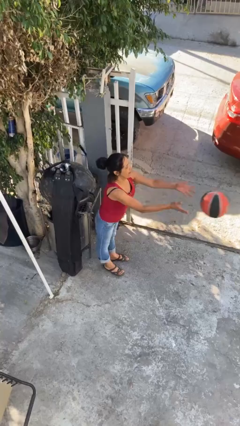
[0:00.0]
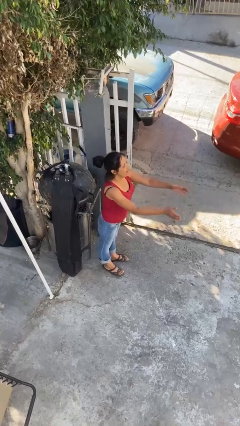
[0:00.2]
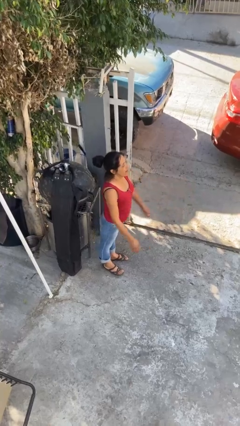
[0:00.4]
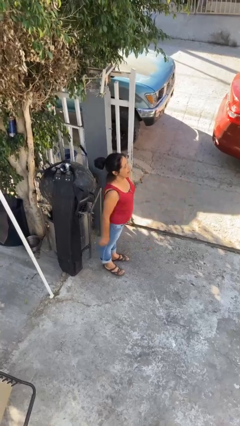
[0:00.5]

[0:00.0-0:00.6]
person throws object to person

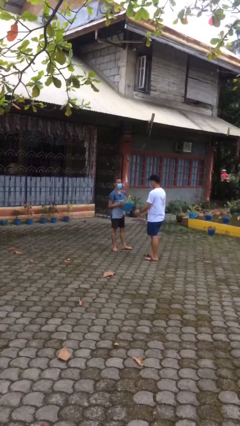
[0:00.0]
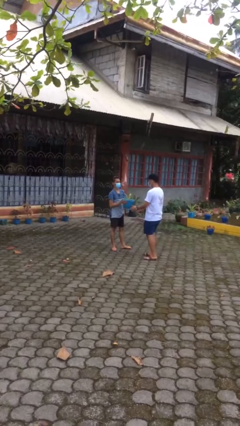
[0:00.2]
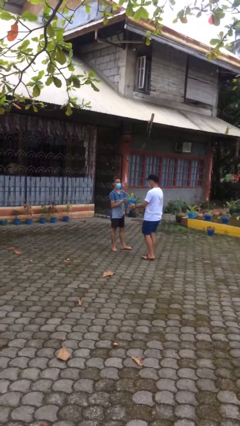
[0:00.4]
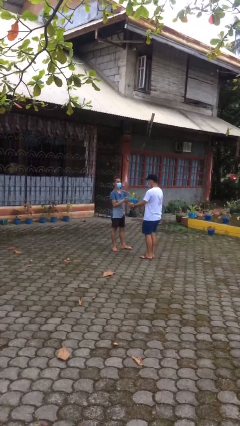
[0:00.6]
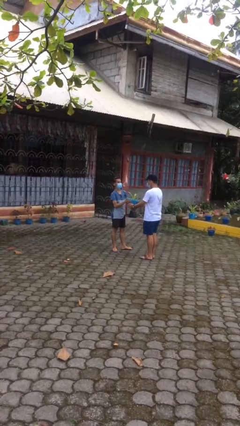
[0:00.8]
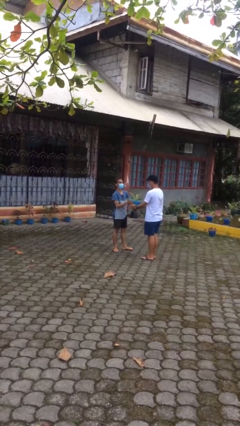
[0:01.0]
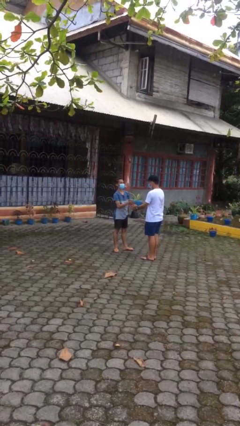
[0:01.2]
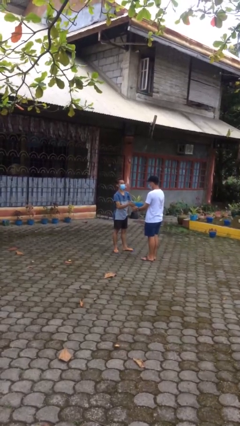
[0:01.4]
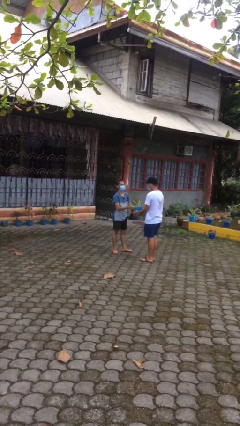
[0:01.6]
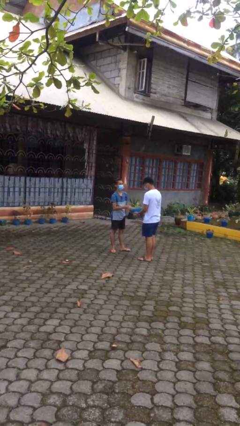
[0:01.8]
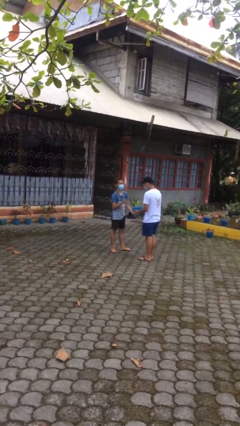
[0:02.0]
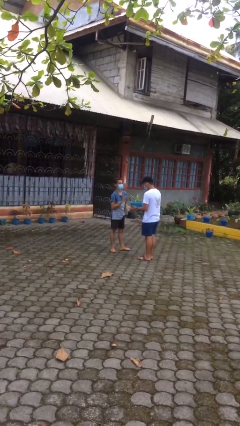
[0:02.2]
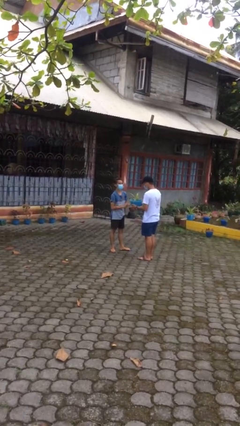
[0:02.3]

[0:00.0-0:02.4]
person transfers object to person

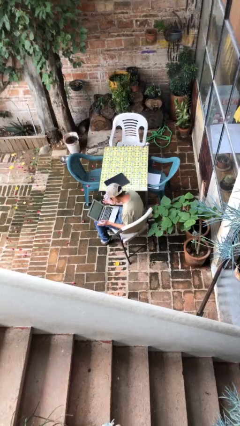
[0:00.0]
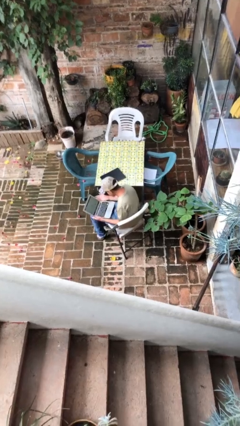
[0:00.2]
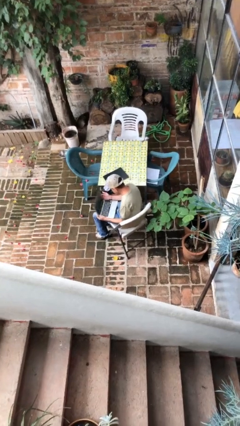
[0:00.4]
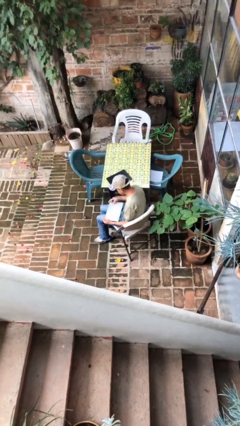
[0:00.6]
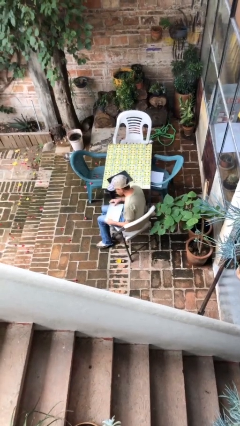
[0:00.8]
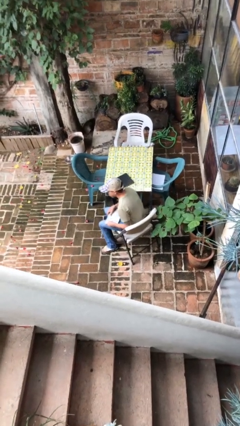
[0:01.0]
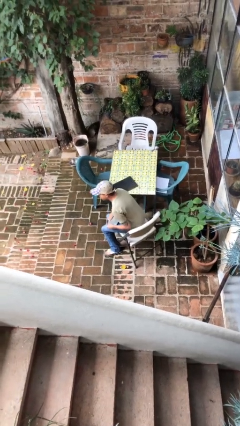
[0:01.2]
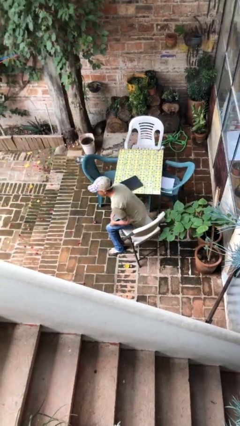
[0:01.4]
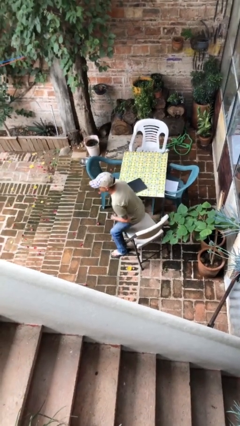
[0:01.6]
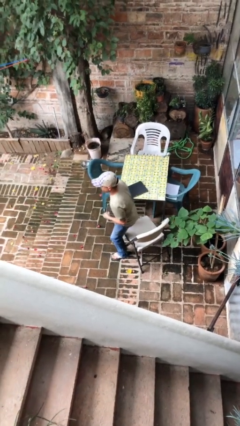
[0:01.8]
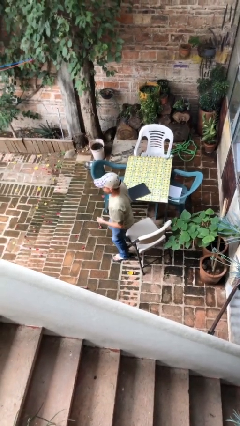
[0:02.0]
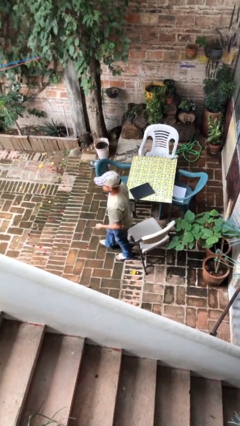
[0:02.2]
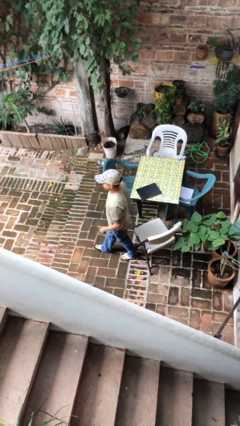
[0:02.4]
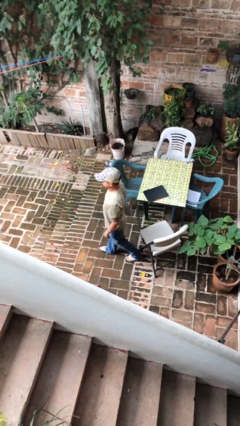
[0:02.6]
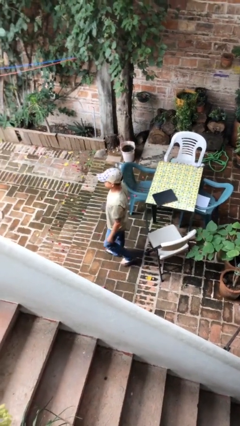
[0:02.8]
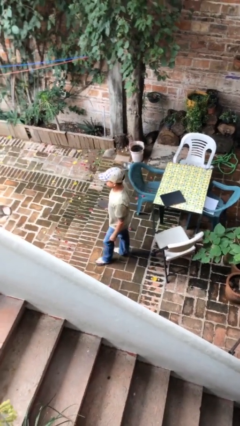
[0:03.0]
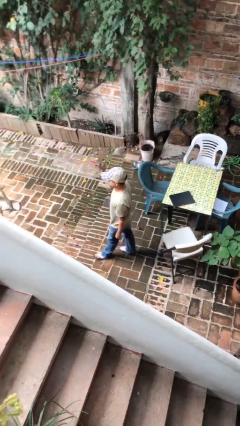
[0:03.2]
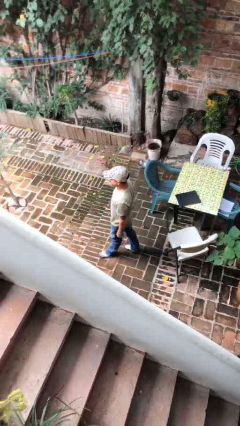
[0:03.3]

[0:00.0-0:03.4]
person stands up

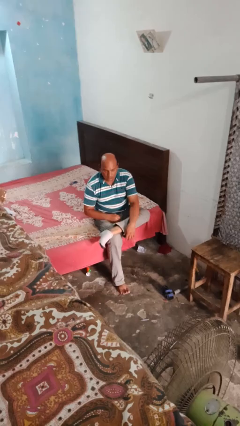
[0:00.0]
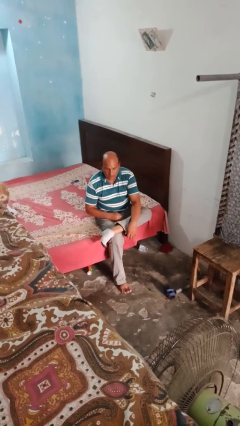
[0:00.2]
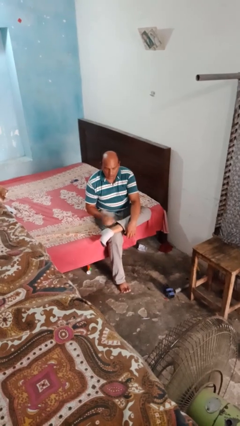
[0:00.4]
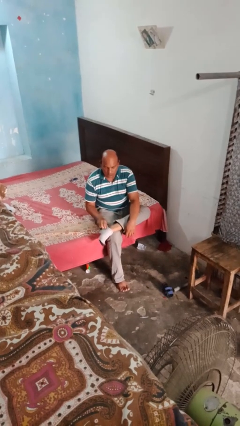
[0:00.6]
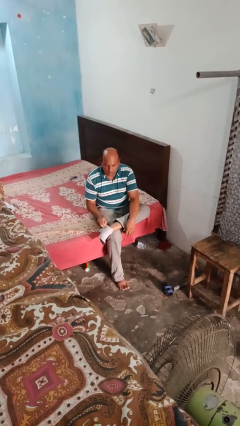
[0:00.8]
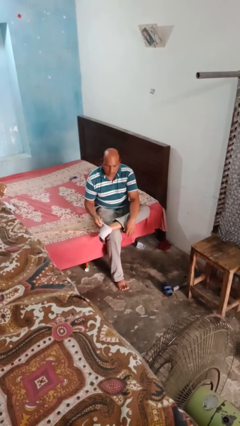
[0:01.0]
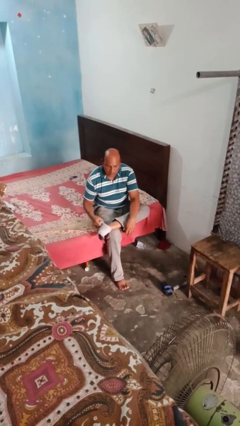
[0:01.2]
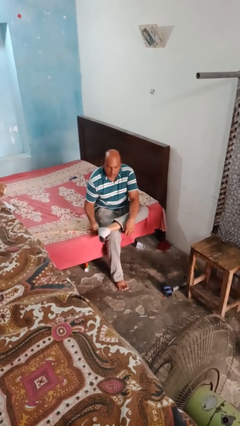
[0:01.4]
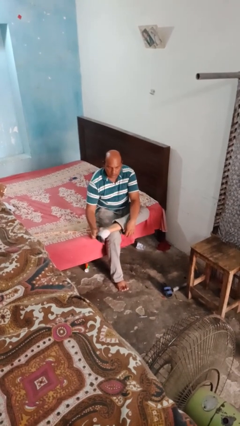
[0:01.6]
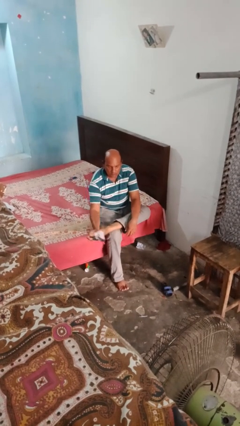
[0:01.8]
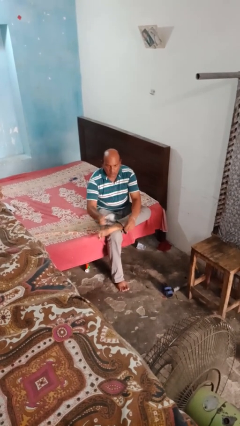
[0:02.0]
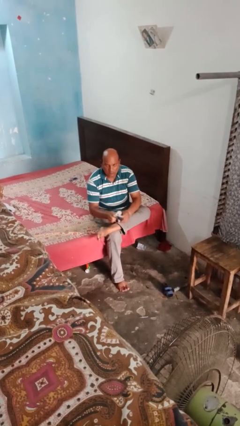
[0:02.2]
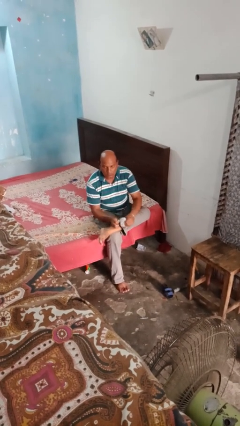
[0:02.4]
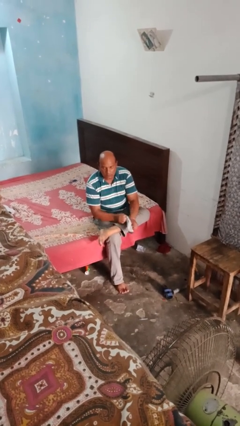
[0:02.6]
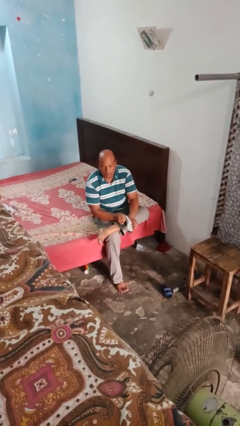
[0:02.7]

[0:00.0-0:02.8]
person takes off socks

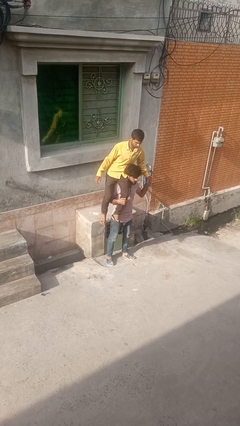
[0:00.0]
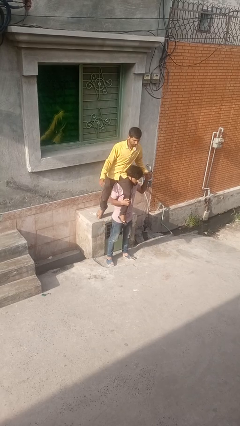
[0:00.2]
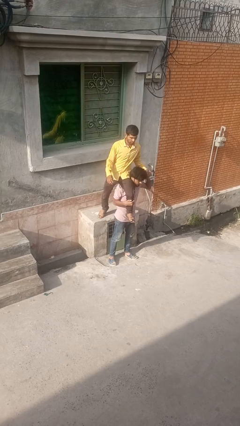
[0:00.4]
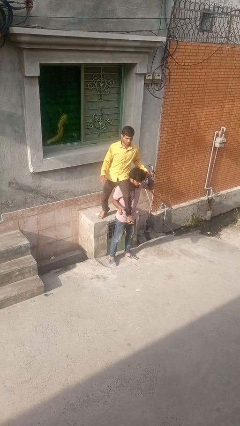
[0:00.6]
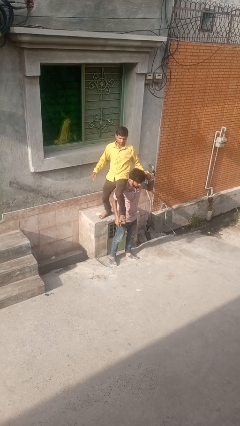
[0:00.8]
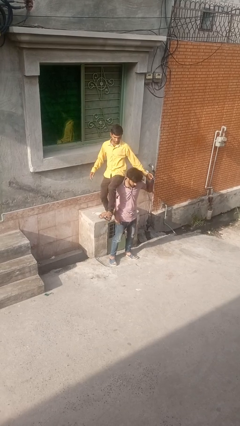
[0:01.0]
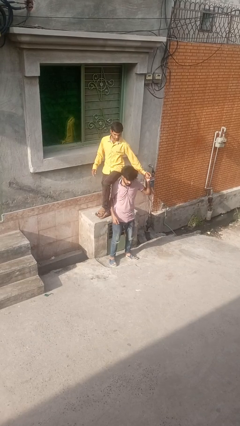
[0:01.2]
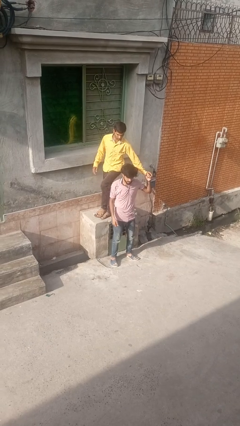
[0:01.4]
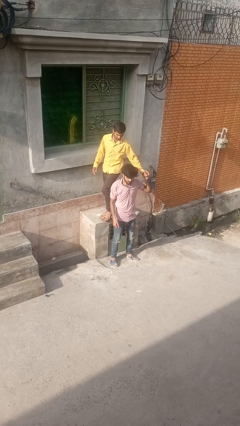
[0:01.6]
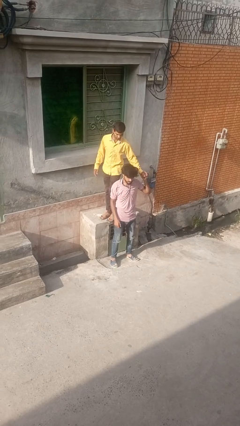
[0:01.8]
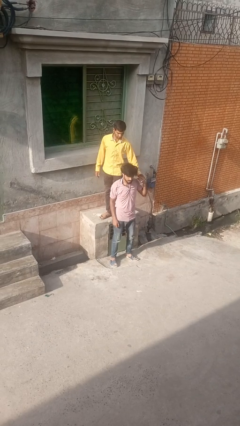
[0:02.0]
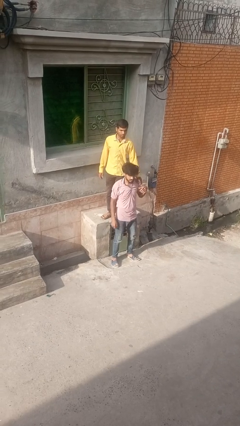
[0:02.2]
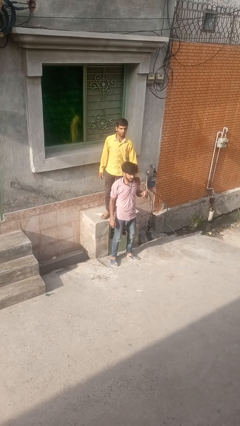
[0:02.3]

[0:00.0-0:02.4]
person puts down person

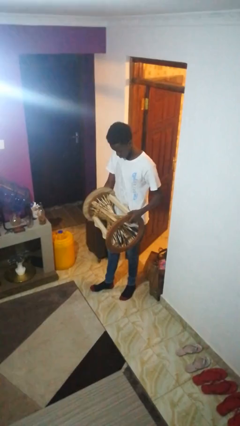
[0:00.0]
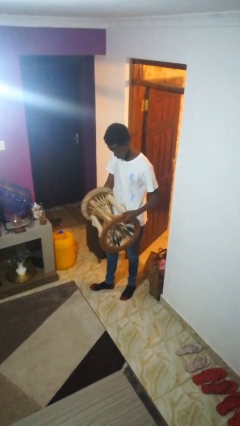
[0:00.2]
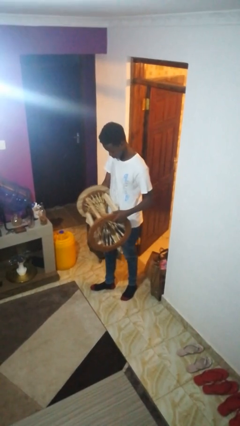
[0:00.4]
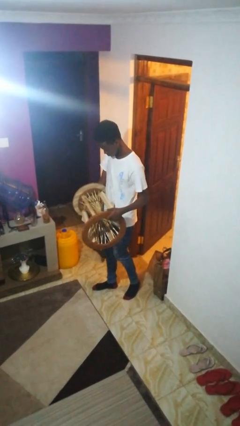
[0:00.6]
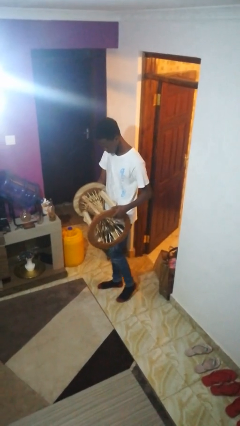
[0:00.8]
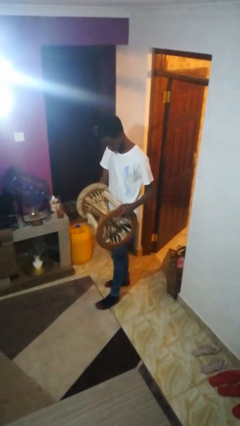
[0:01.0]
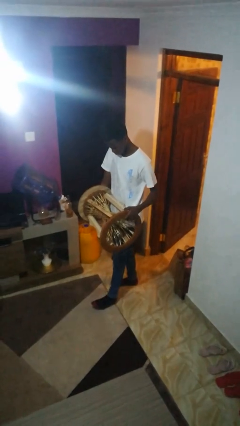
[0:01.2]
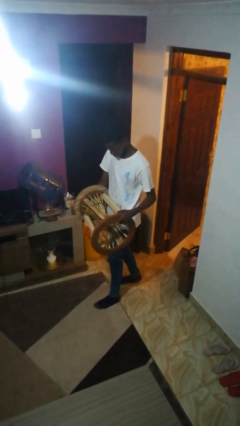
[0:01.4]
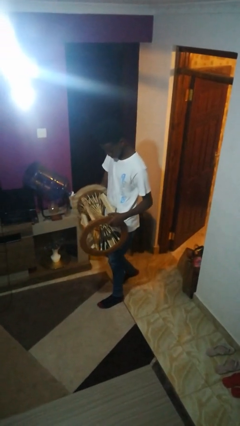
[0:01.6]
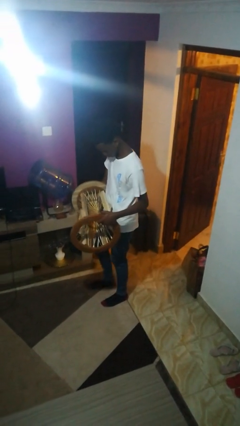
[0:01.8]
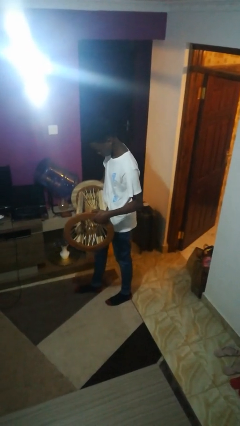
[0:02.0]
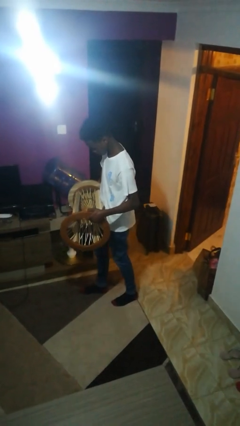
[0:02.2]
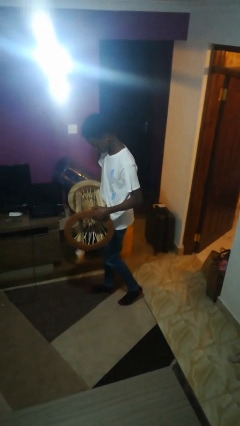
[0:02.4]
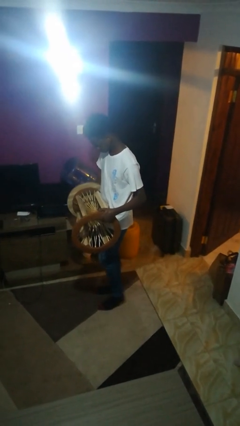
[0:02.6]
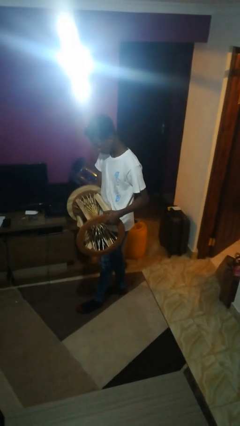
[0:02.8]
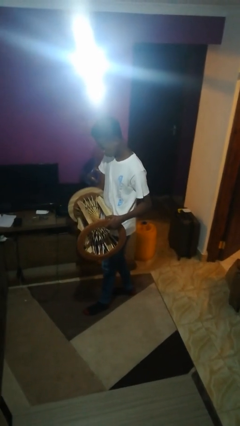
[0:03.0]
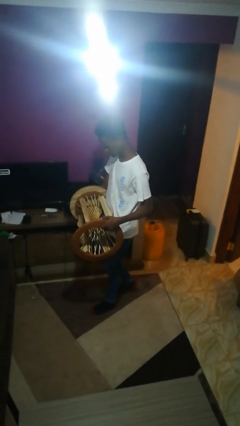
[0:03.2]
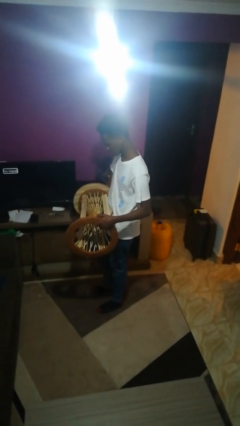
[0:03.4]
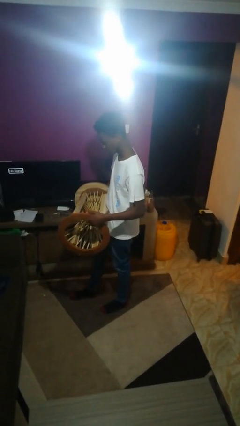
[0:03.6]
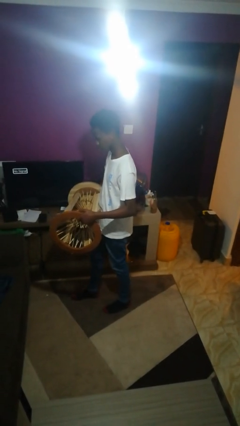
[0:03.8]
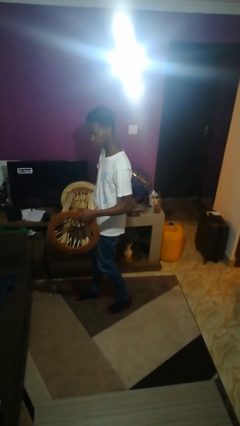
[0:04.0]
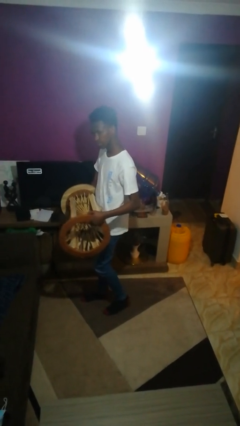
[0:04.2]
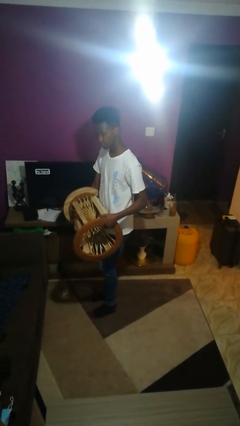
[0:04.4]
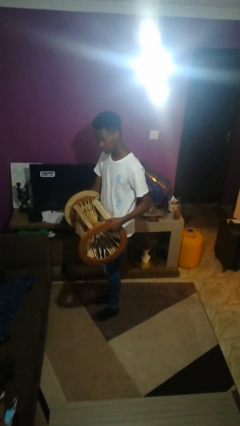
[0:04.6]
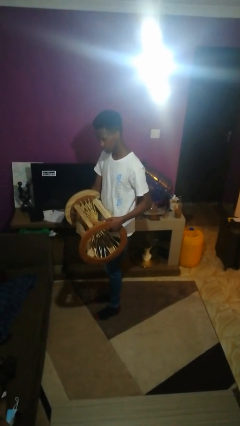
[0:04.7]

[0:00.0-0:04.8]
person carries furniture

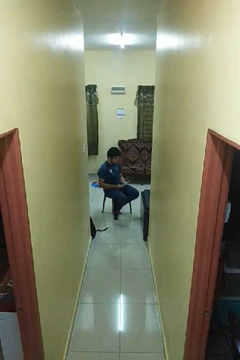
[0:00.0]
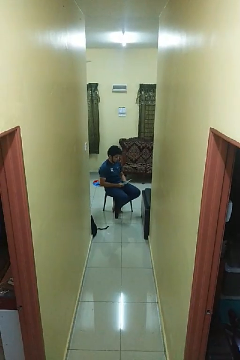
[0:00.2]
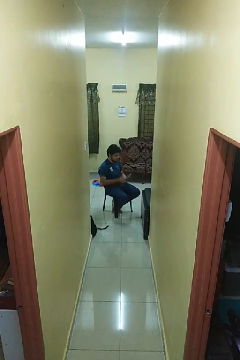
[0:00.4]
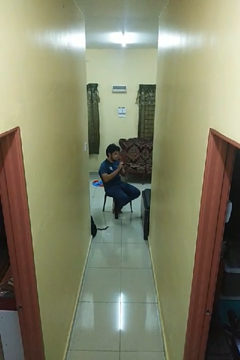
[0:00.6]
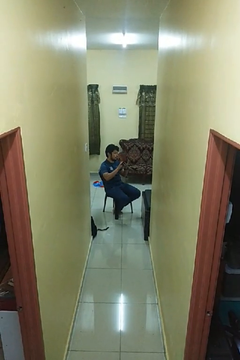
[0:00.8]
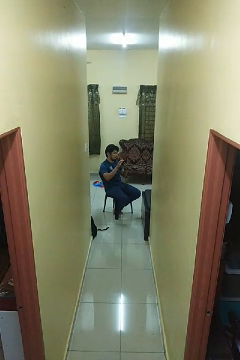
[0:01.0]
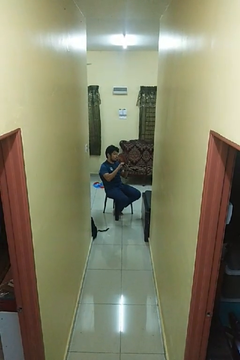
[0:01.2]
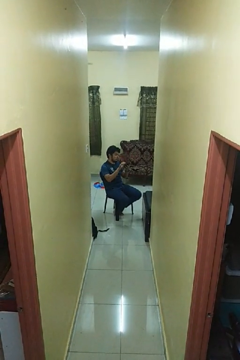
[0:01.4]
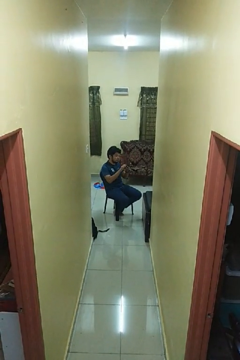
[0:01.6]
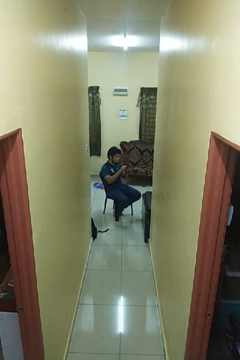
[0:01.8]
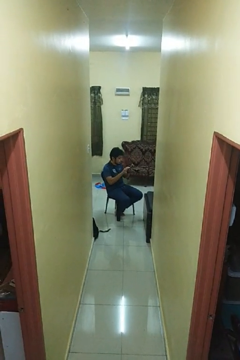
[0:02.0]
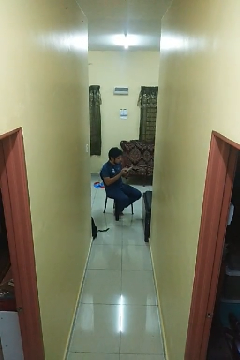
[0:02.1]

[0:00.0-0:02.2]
person interacts with tablet
